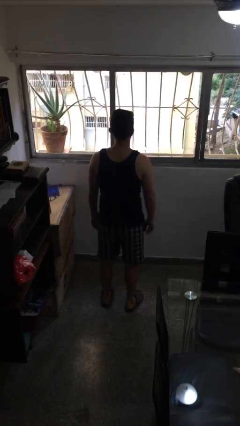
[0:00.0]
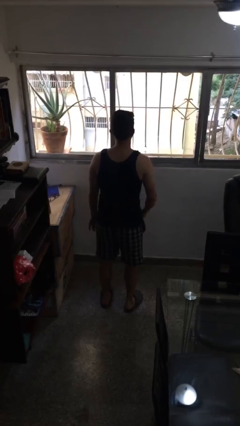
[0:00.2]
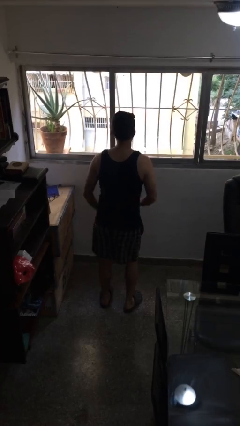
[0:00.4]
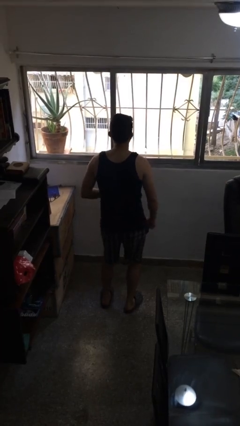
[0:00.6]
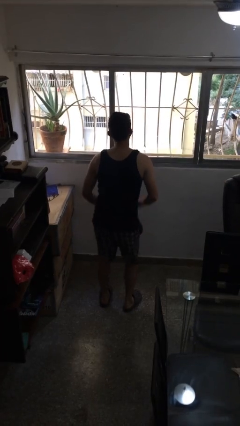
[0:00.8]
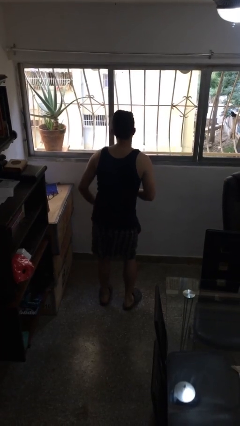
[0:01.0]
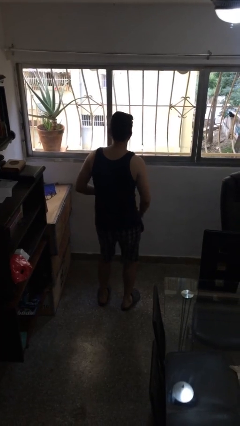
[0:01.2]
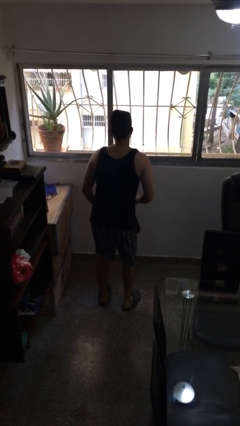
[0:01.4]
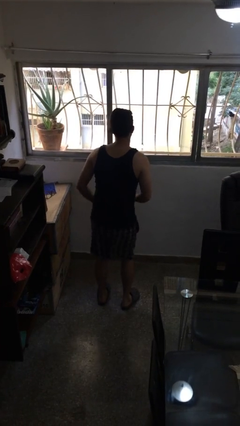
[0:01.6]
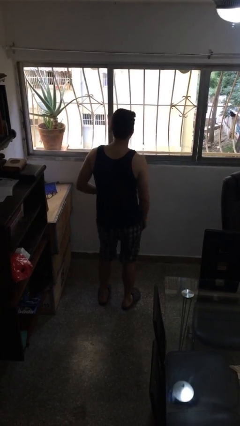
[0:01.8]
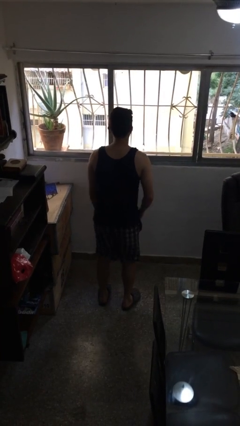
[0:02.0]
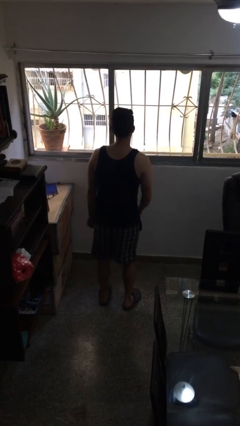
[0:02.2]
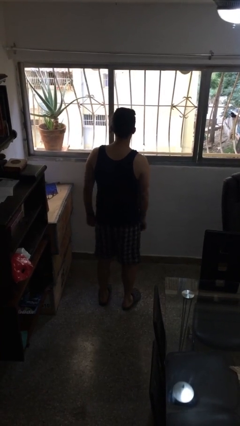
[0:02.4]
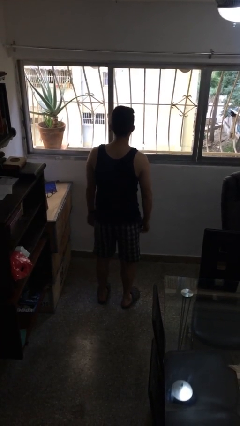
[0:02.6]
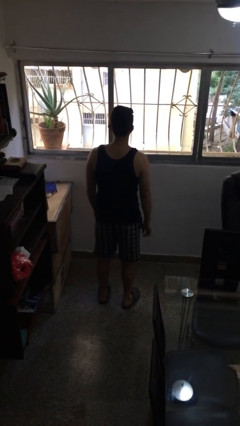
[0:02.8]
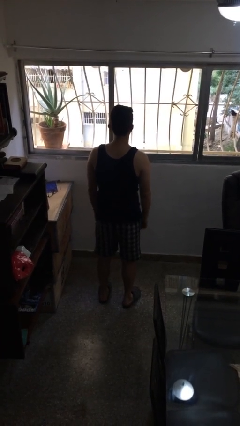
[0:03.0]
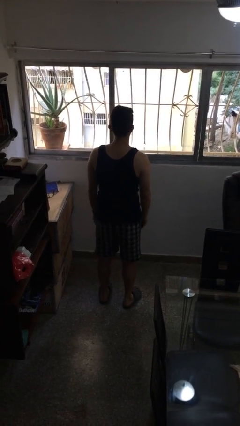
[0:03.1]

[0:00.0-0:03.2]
person dances in place

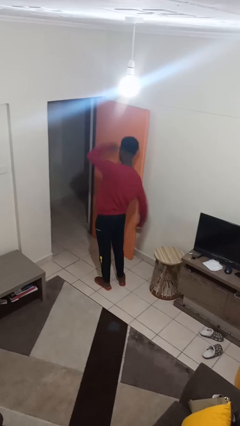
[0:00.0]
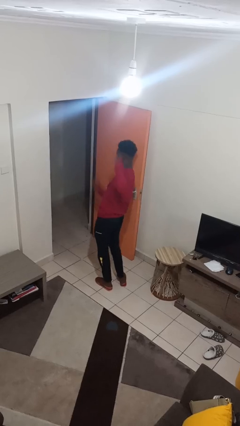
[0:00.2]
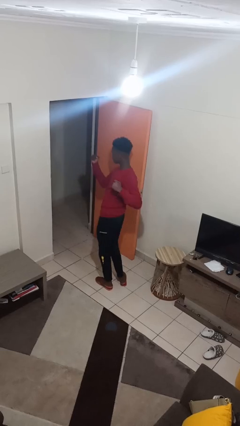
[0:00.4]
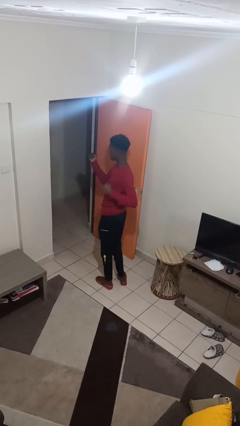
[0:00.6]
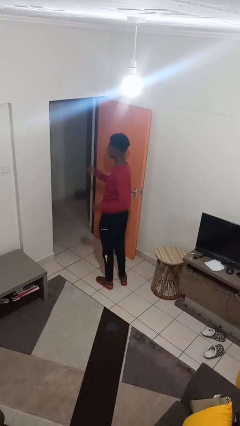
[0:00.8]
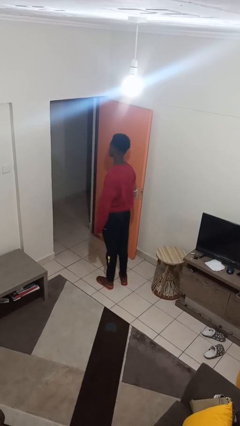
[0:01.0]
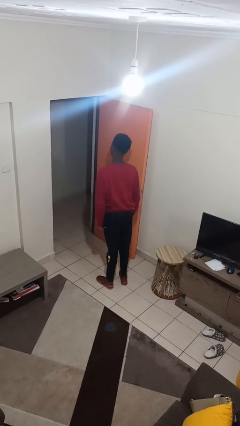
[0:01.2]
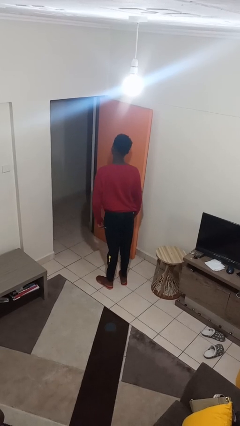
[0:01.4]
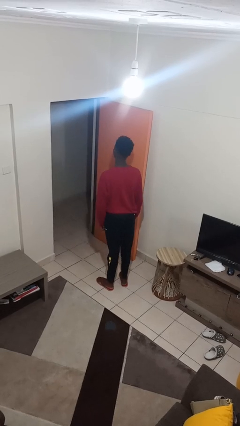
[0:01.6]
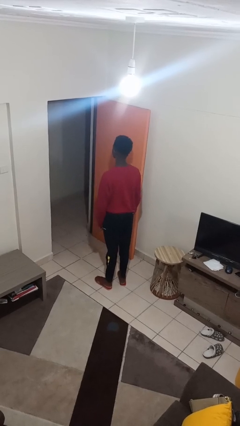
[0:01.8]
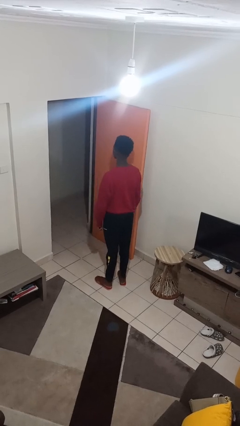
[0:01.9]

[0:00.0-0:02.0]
person punches

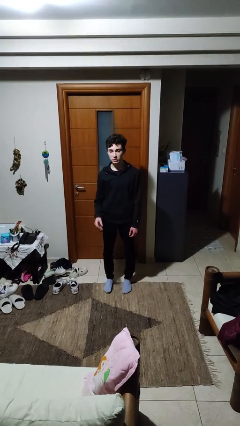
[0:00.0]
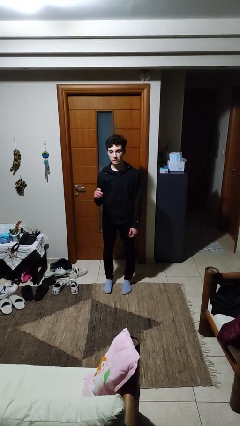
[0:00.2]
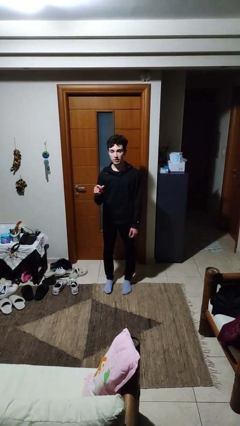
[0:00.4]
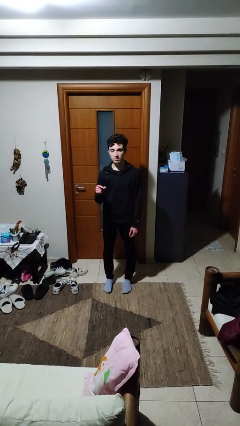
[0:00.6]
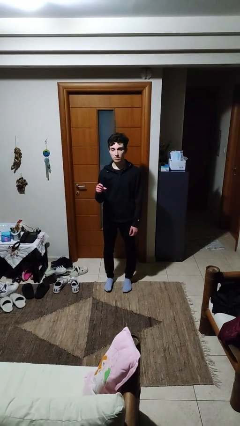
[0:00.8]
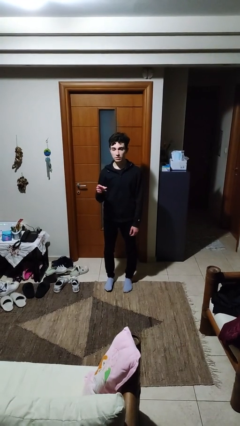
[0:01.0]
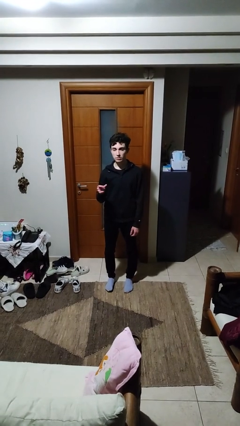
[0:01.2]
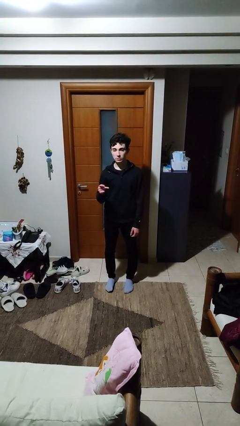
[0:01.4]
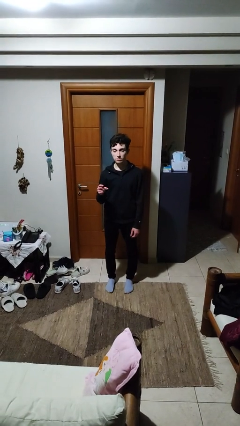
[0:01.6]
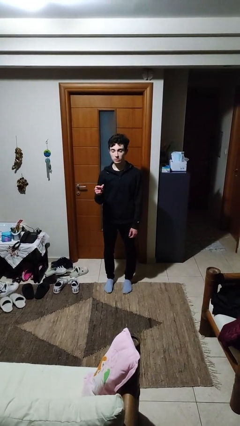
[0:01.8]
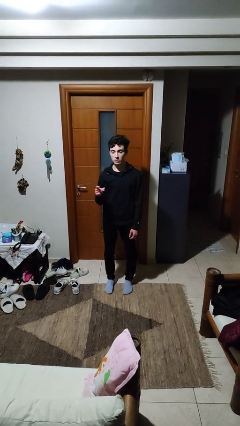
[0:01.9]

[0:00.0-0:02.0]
person snaps fingers

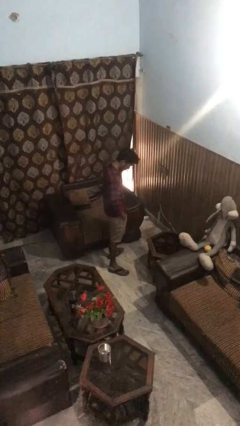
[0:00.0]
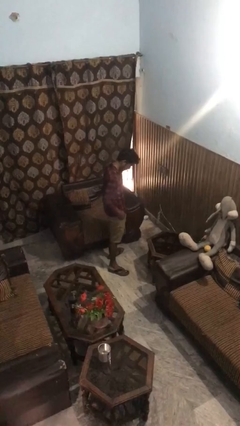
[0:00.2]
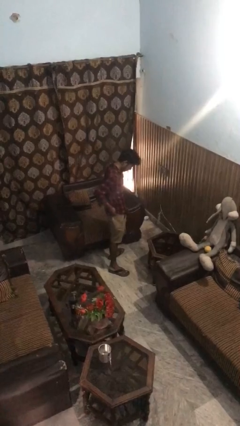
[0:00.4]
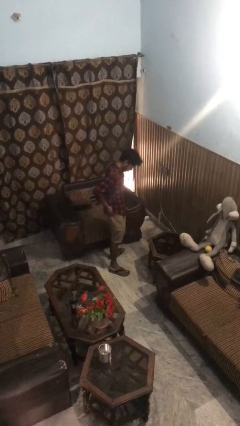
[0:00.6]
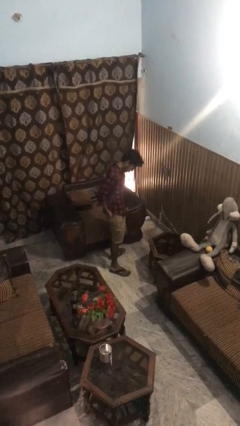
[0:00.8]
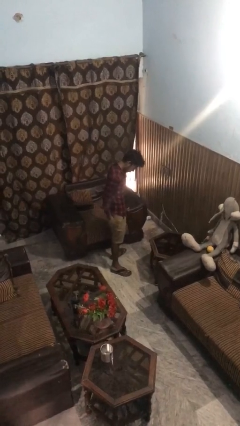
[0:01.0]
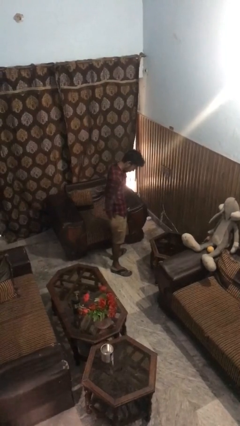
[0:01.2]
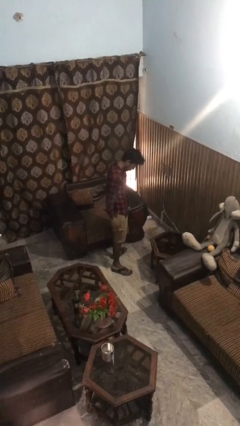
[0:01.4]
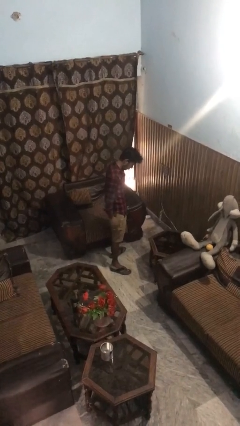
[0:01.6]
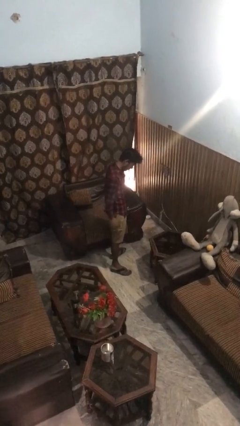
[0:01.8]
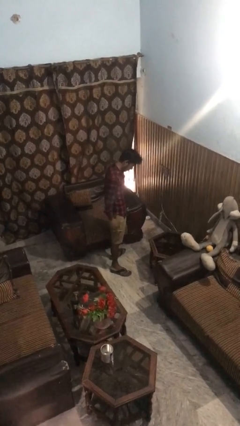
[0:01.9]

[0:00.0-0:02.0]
person puts hands in back pockets

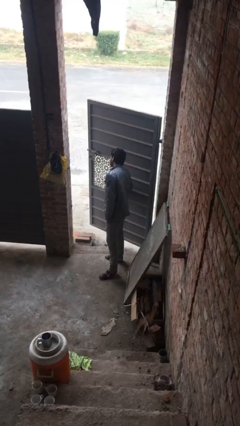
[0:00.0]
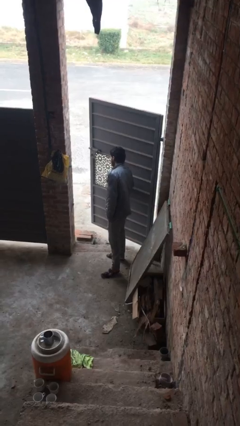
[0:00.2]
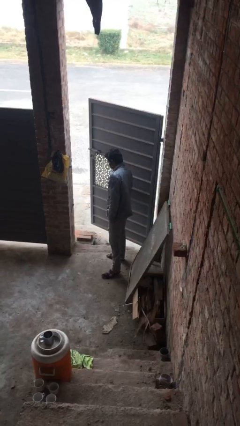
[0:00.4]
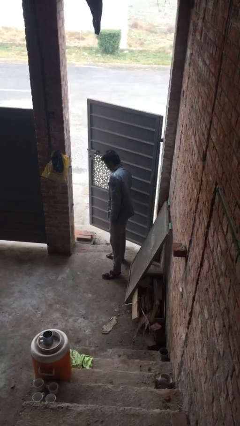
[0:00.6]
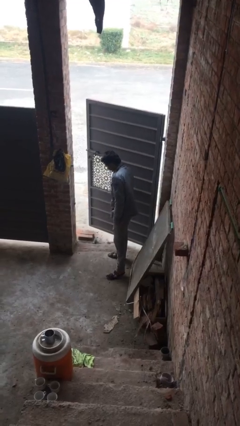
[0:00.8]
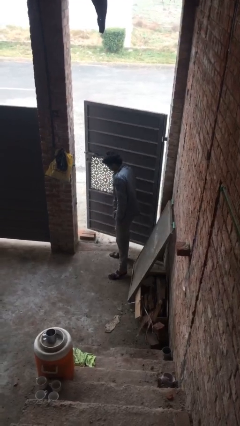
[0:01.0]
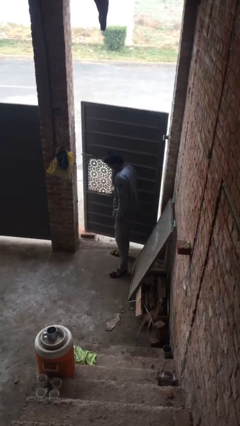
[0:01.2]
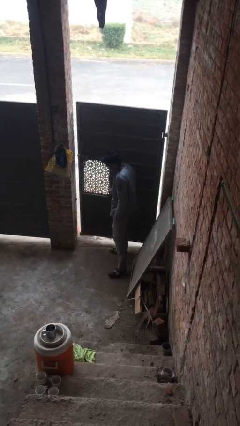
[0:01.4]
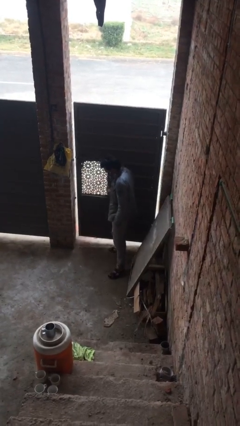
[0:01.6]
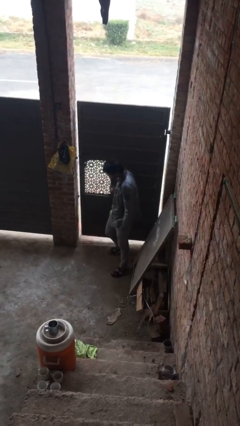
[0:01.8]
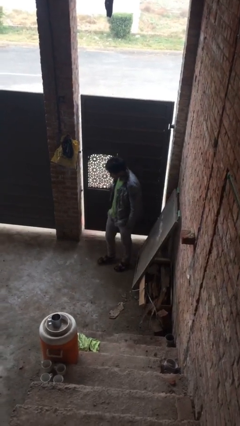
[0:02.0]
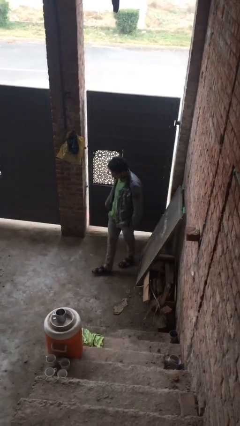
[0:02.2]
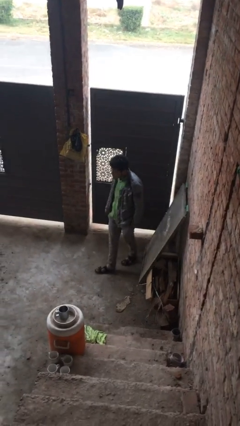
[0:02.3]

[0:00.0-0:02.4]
person closes facility door

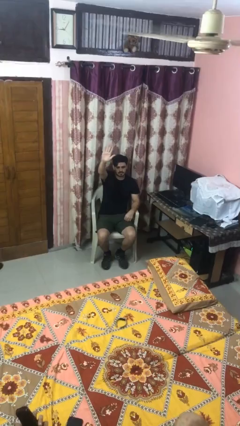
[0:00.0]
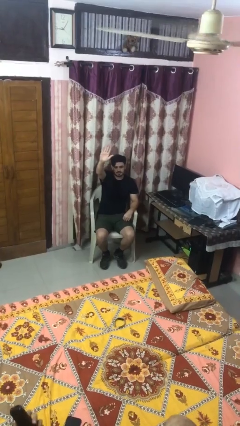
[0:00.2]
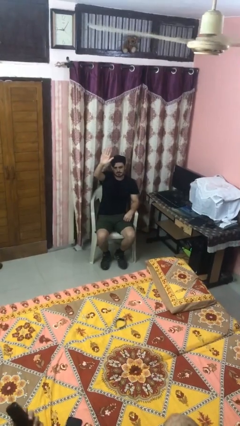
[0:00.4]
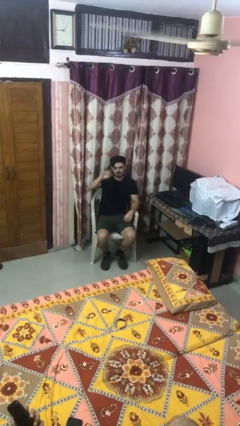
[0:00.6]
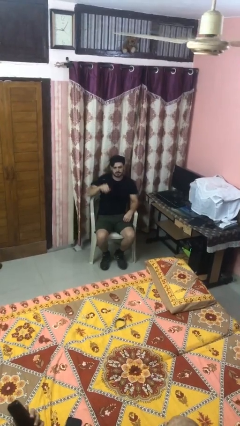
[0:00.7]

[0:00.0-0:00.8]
person gestures lower hand

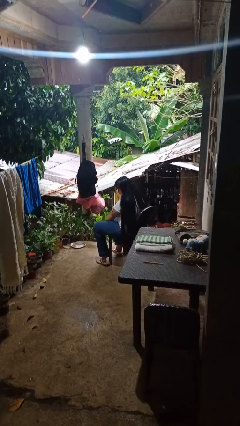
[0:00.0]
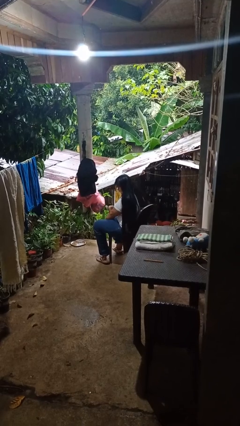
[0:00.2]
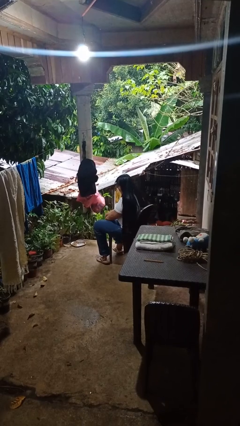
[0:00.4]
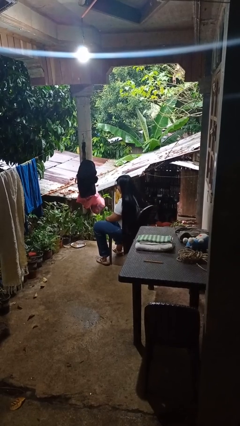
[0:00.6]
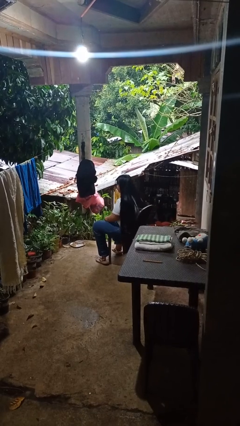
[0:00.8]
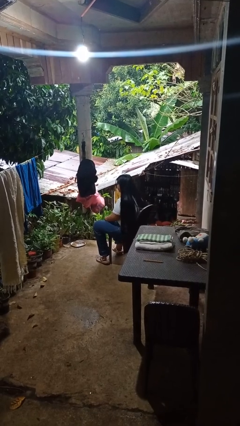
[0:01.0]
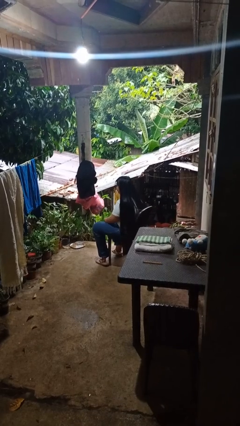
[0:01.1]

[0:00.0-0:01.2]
person swats bug

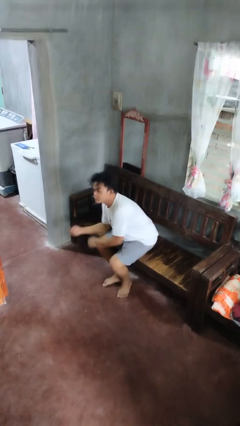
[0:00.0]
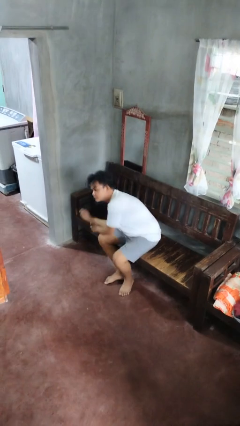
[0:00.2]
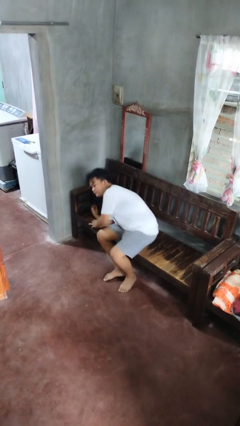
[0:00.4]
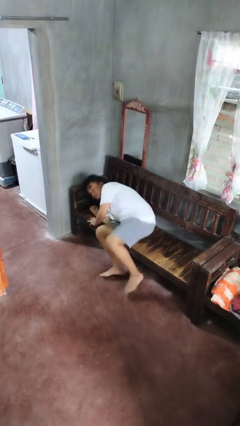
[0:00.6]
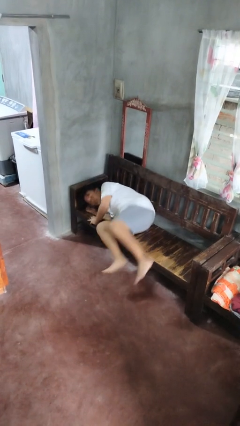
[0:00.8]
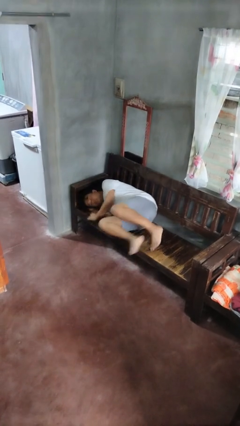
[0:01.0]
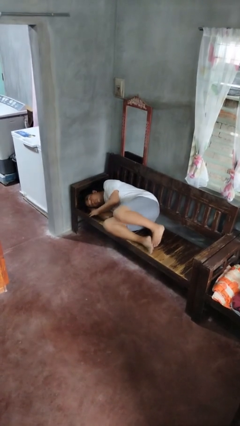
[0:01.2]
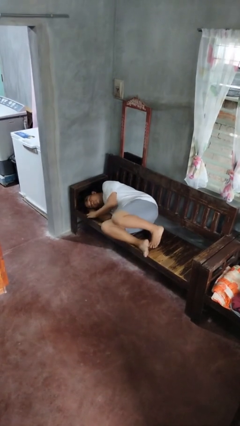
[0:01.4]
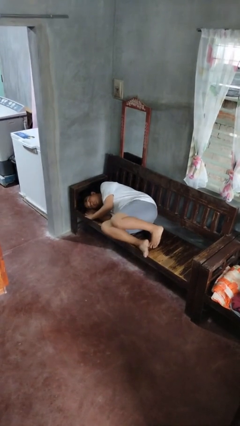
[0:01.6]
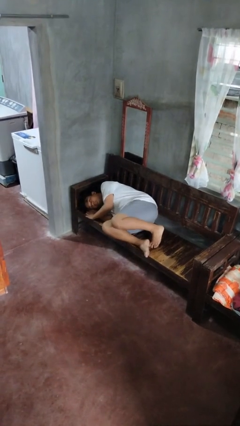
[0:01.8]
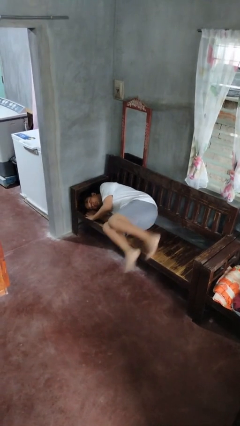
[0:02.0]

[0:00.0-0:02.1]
person lies down on couch

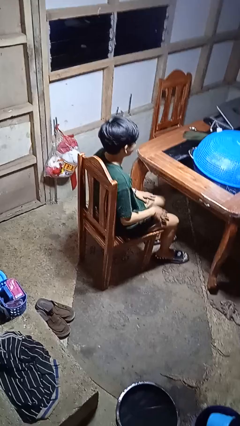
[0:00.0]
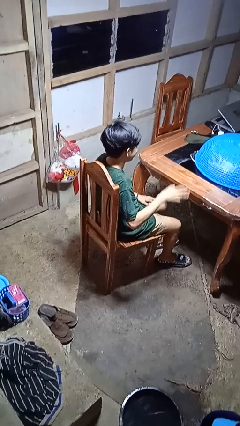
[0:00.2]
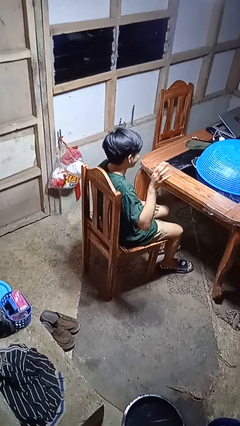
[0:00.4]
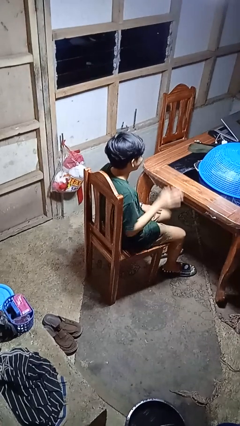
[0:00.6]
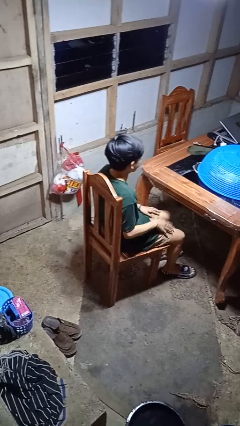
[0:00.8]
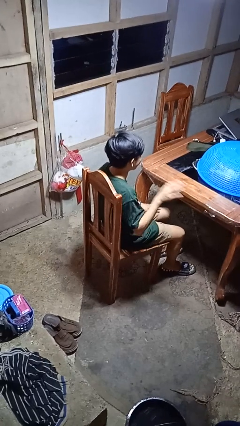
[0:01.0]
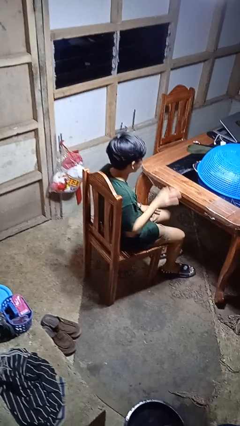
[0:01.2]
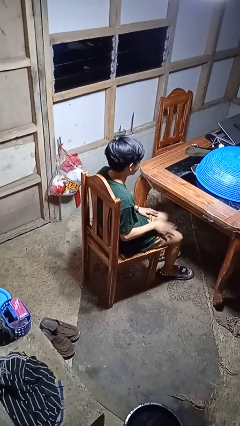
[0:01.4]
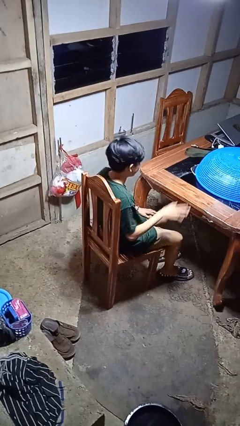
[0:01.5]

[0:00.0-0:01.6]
person slaps hands on thighs
